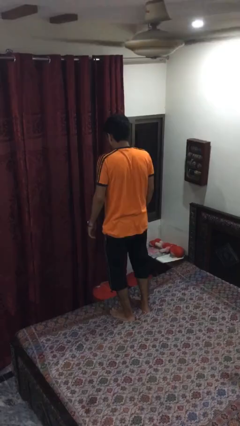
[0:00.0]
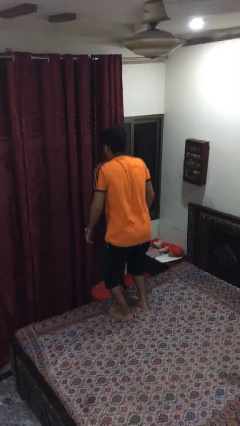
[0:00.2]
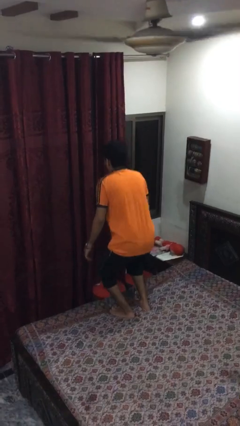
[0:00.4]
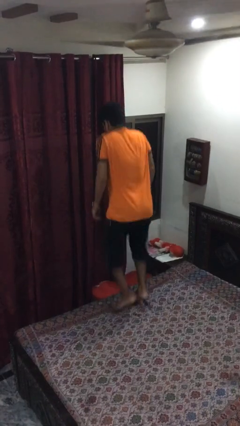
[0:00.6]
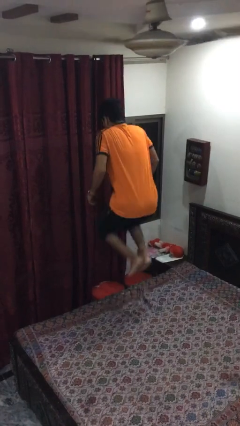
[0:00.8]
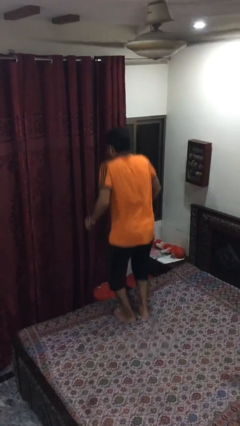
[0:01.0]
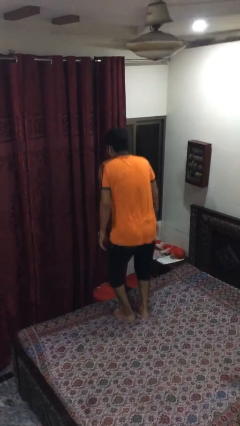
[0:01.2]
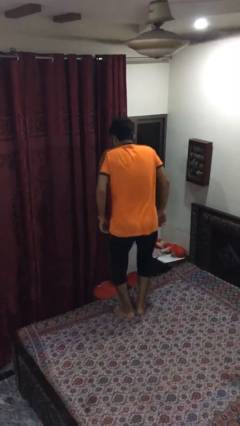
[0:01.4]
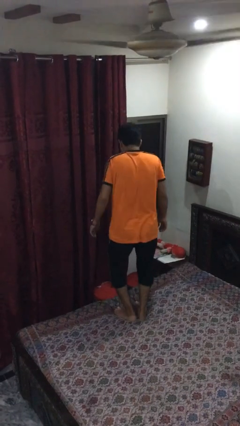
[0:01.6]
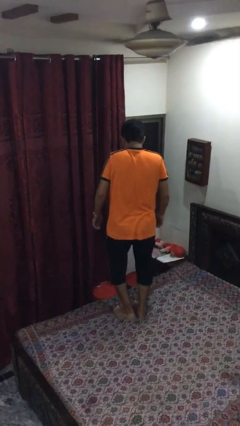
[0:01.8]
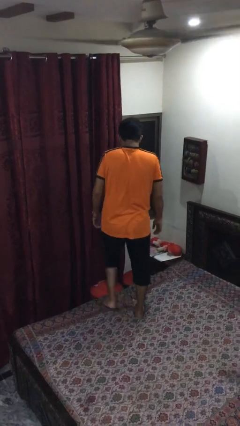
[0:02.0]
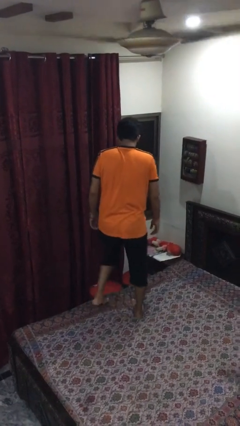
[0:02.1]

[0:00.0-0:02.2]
person jumps on bed

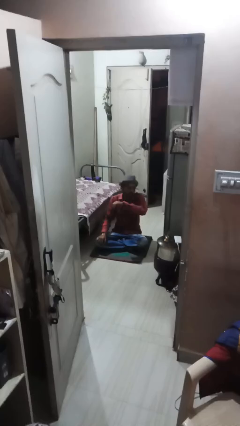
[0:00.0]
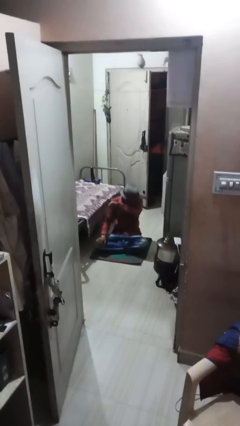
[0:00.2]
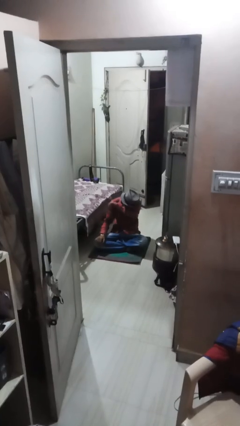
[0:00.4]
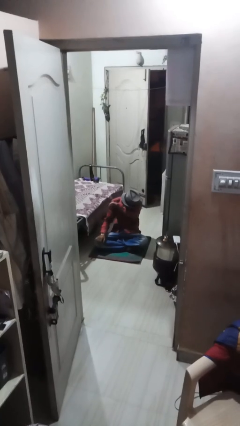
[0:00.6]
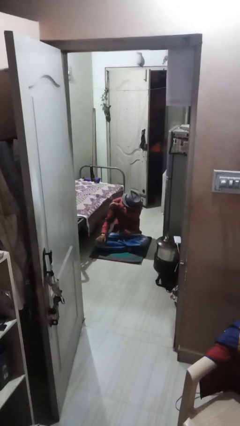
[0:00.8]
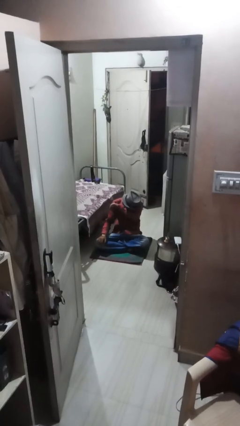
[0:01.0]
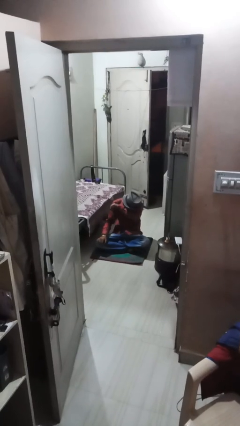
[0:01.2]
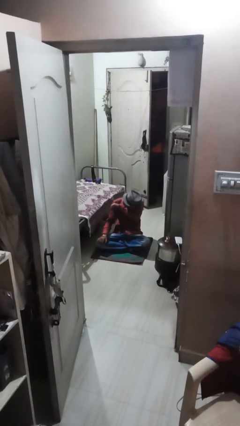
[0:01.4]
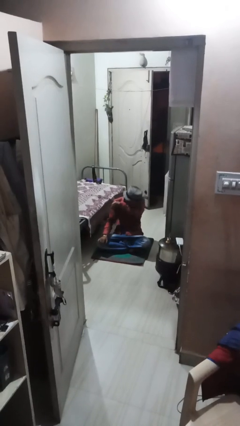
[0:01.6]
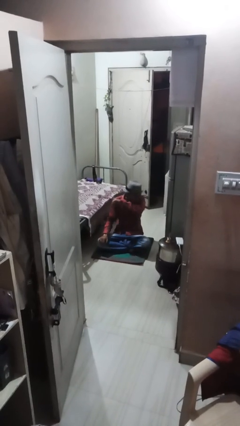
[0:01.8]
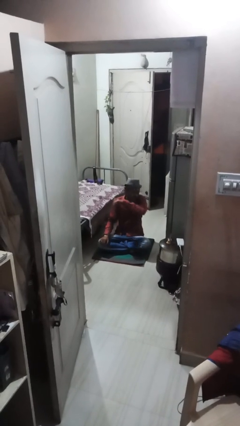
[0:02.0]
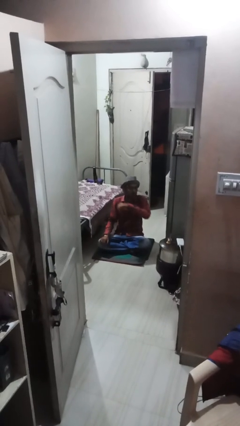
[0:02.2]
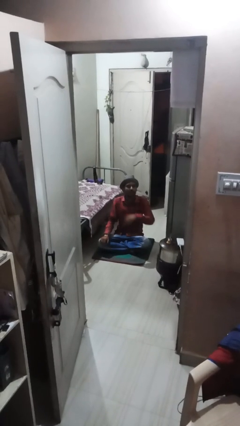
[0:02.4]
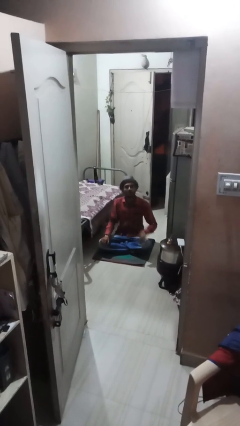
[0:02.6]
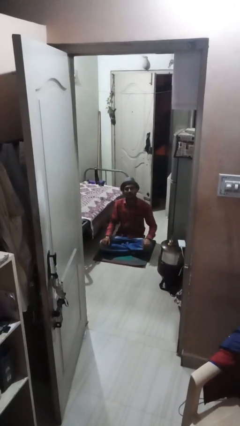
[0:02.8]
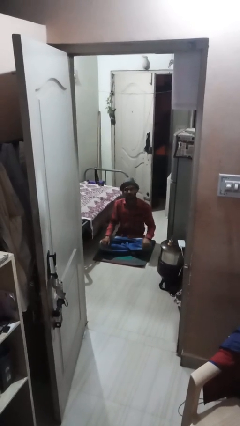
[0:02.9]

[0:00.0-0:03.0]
person sneezes into arm

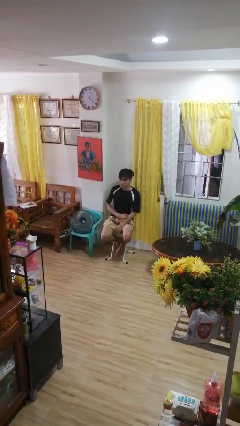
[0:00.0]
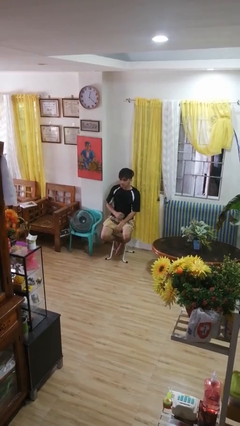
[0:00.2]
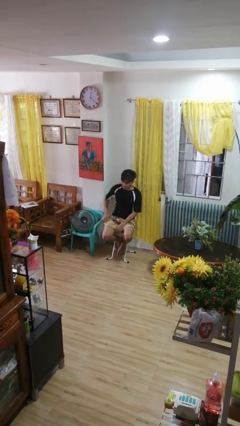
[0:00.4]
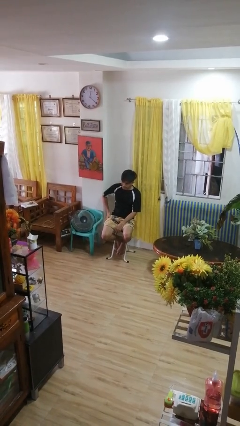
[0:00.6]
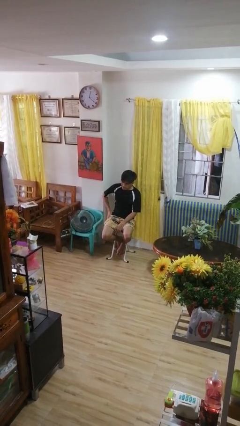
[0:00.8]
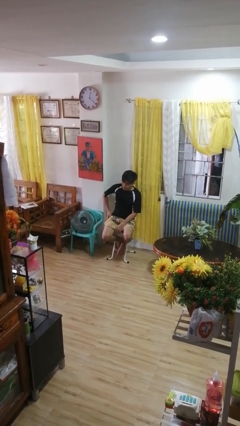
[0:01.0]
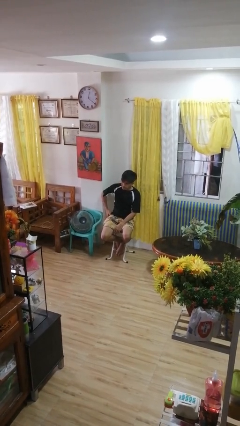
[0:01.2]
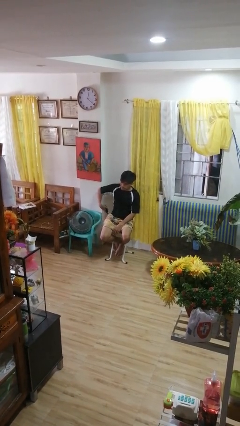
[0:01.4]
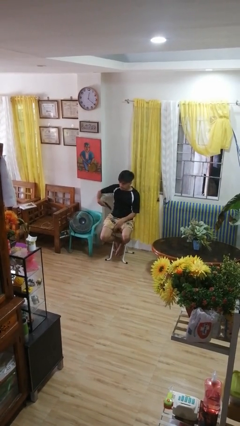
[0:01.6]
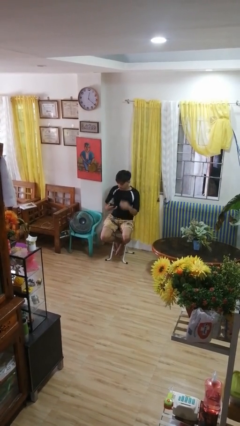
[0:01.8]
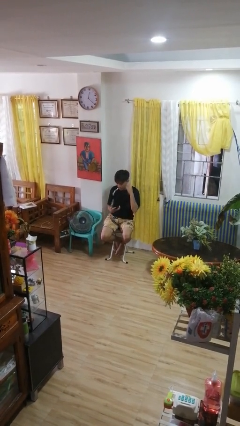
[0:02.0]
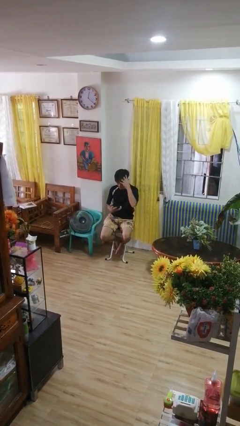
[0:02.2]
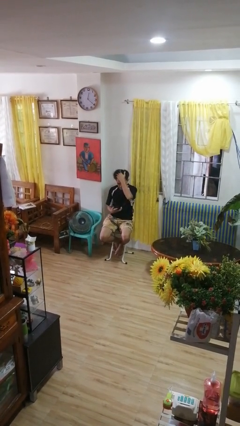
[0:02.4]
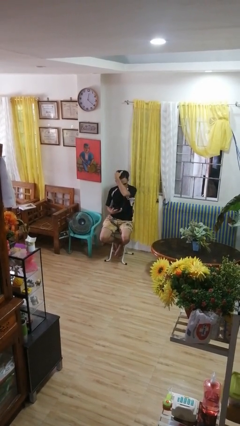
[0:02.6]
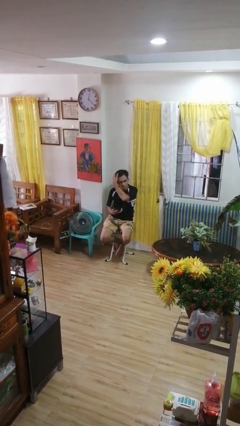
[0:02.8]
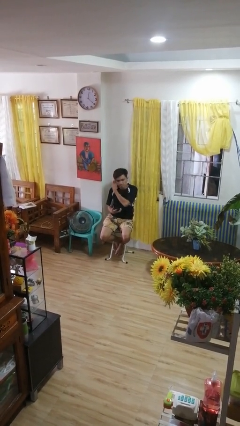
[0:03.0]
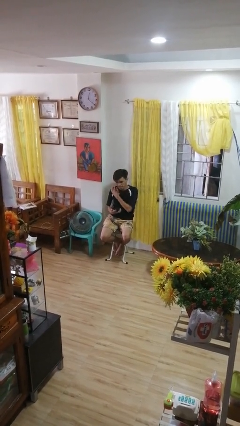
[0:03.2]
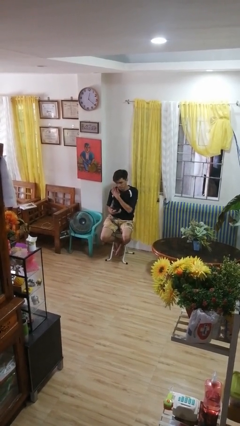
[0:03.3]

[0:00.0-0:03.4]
person takes phone from pocket

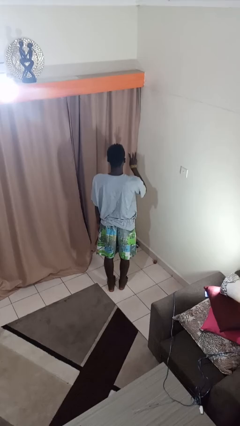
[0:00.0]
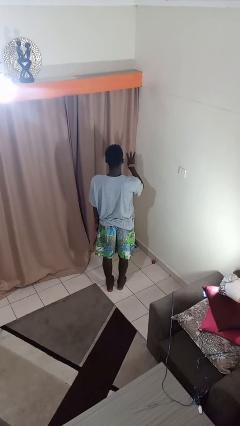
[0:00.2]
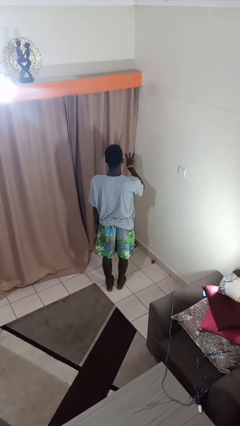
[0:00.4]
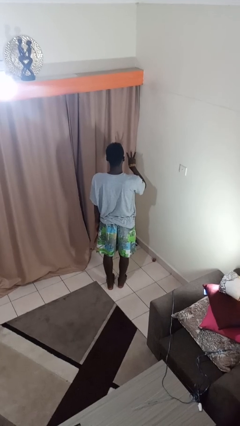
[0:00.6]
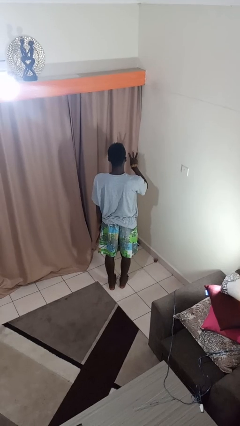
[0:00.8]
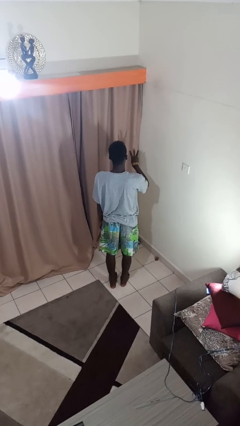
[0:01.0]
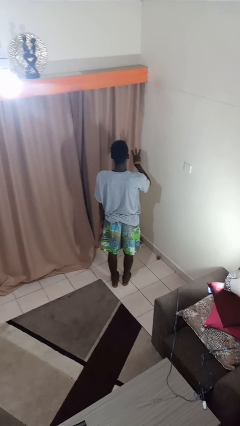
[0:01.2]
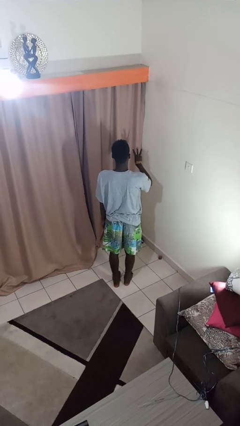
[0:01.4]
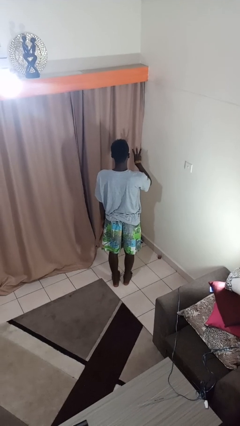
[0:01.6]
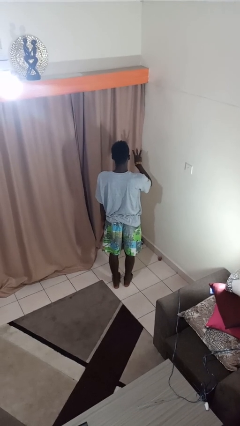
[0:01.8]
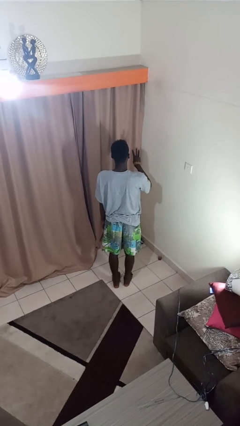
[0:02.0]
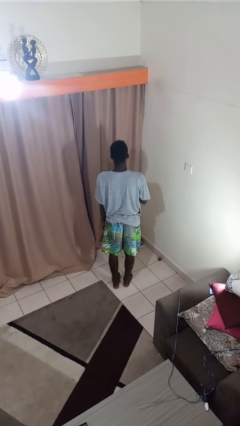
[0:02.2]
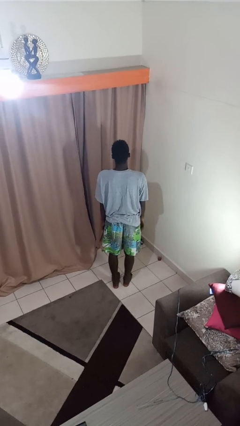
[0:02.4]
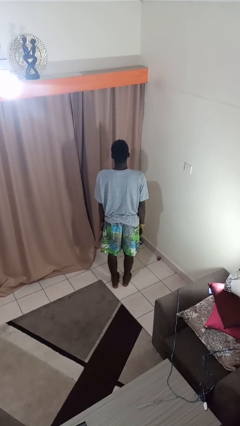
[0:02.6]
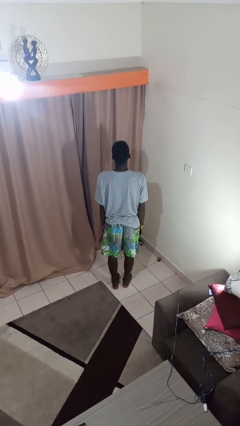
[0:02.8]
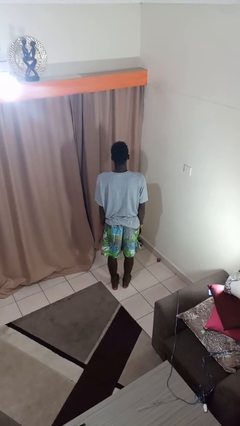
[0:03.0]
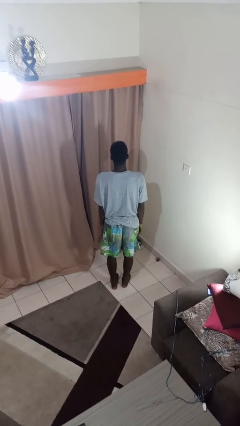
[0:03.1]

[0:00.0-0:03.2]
person gestures number three

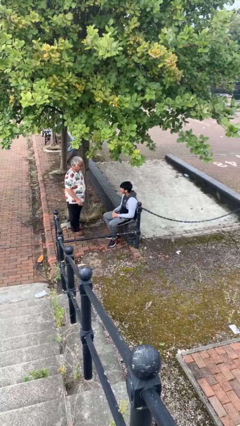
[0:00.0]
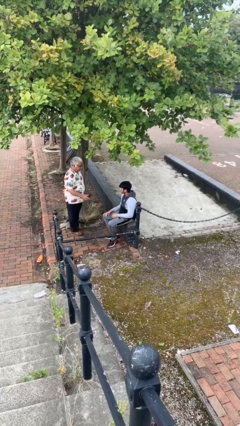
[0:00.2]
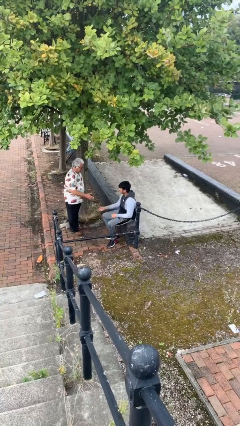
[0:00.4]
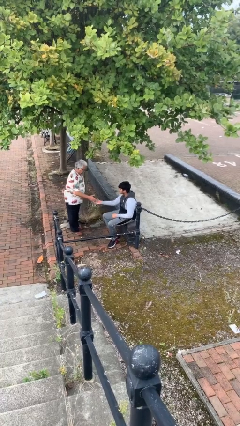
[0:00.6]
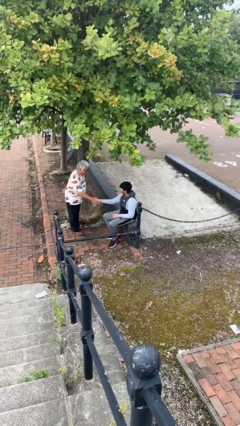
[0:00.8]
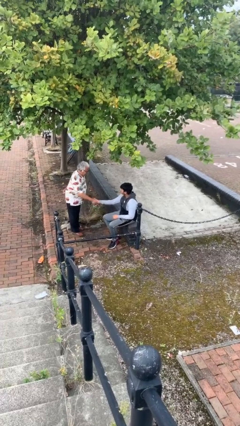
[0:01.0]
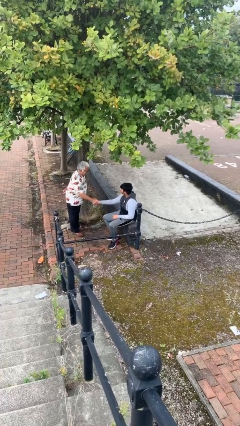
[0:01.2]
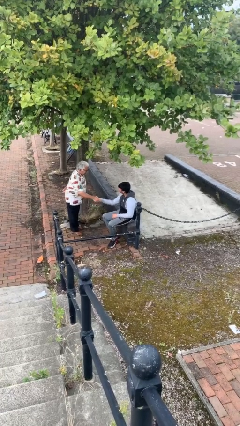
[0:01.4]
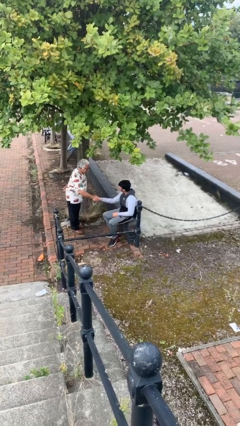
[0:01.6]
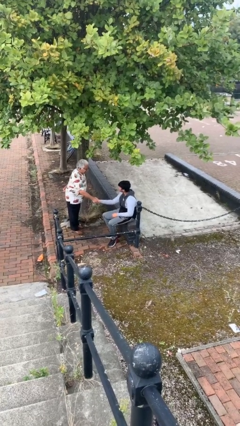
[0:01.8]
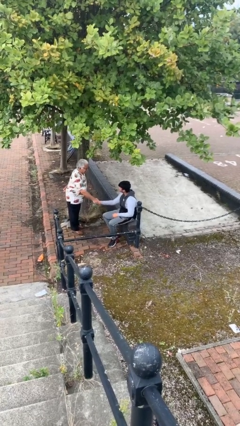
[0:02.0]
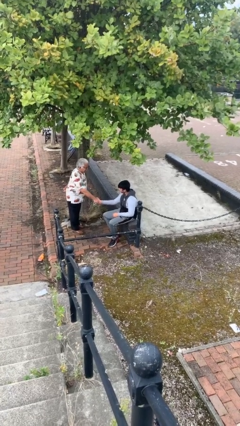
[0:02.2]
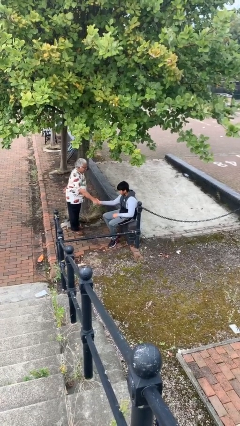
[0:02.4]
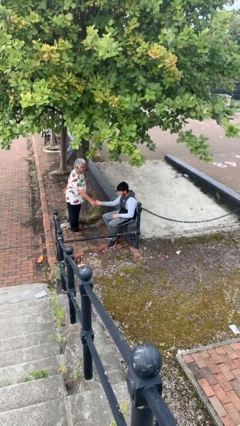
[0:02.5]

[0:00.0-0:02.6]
person shakes hand

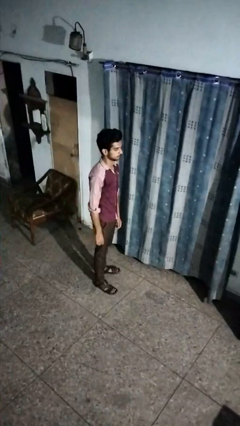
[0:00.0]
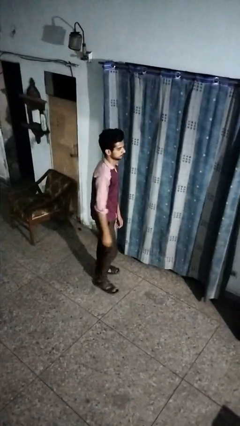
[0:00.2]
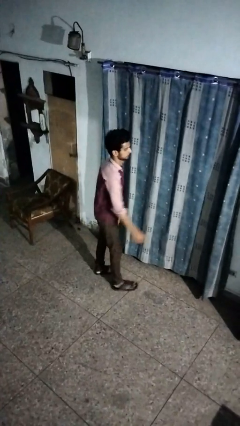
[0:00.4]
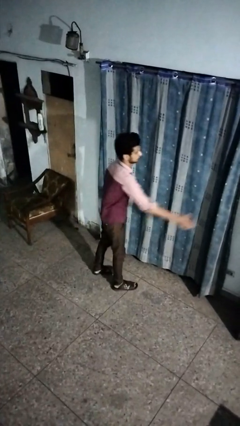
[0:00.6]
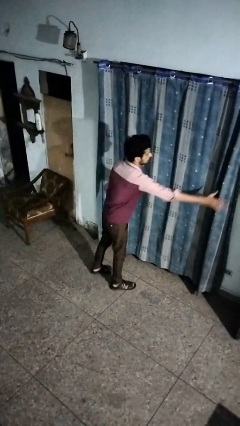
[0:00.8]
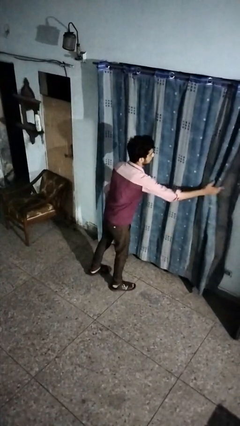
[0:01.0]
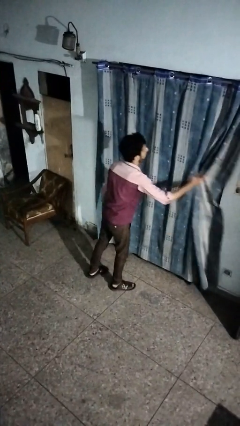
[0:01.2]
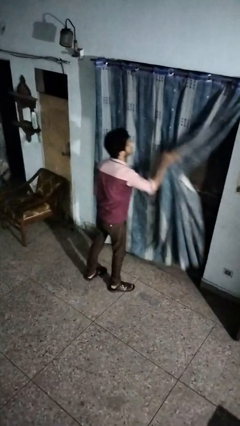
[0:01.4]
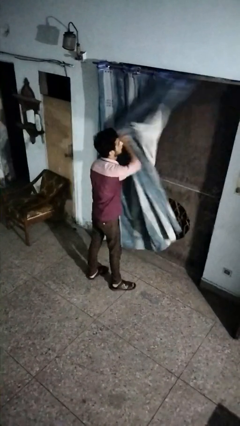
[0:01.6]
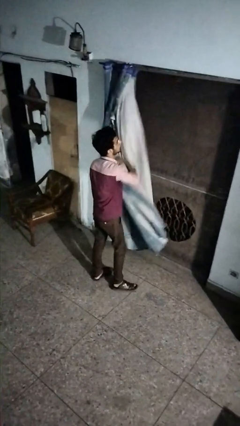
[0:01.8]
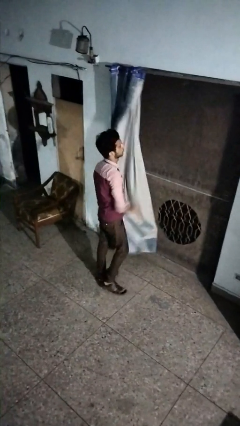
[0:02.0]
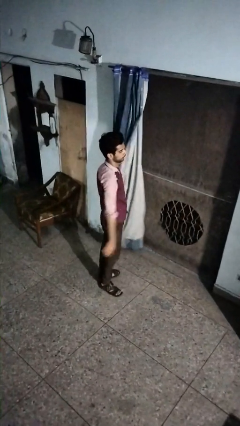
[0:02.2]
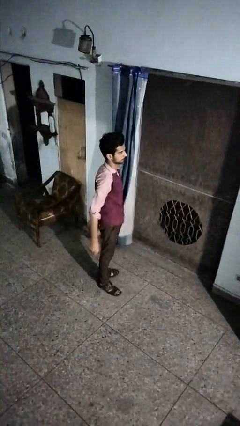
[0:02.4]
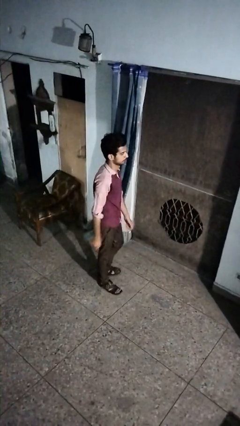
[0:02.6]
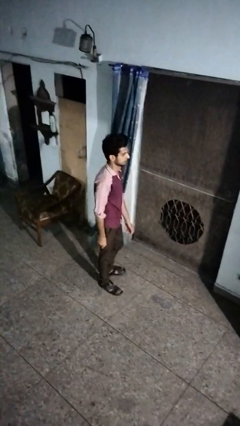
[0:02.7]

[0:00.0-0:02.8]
person opens curtains
